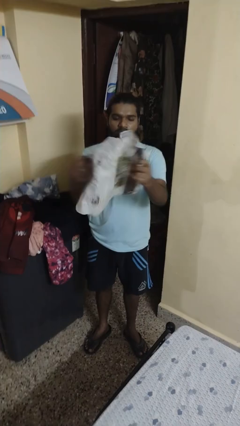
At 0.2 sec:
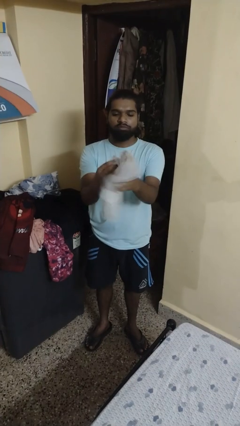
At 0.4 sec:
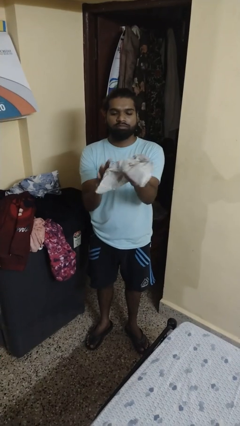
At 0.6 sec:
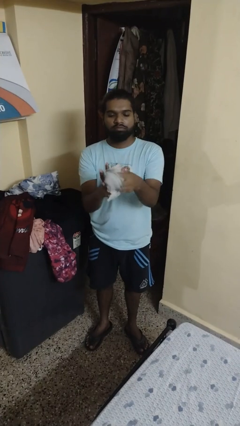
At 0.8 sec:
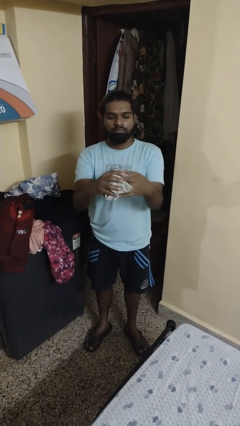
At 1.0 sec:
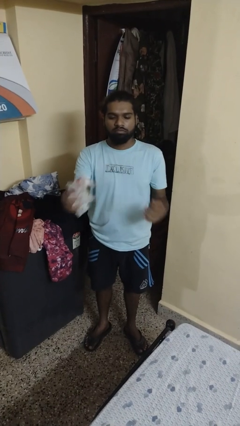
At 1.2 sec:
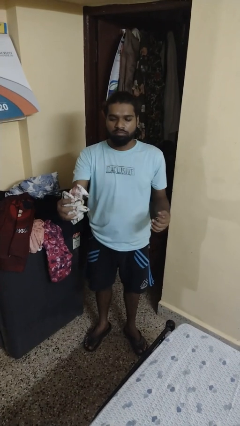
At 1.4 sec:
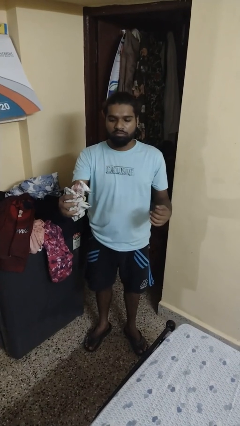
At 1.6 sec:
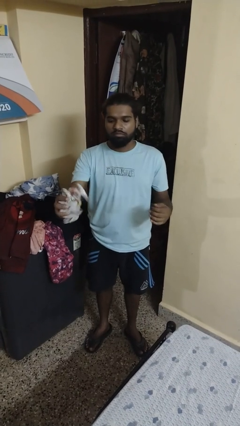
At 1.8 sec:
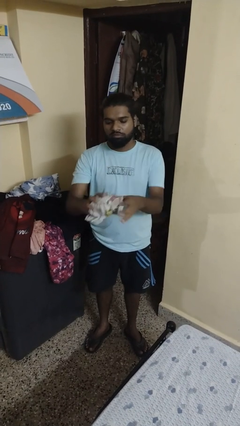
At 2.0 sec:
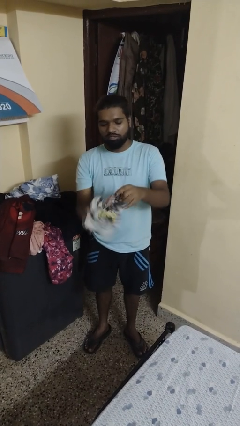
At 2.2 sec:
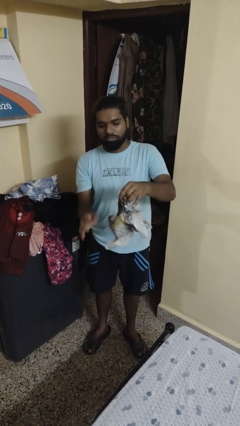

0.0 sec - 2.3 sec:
person crumples paper

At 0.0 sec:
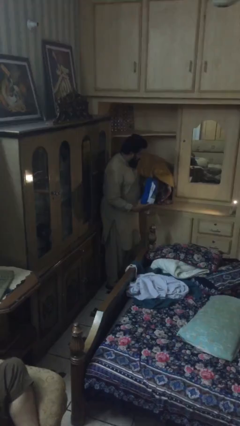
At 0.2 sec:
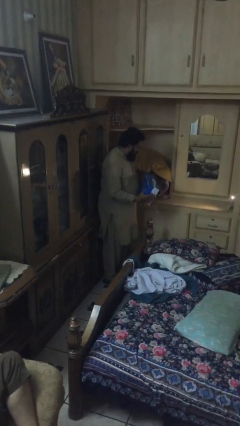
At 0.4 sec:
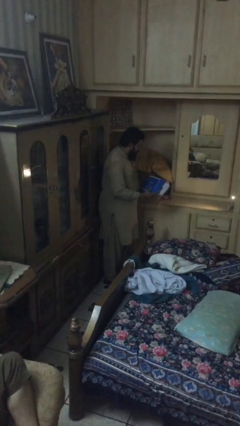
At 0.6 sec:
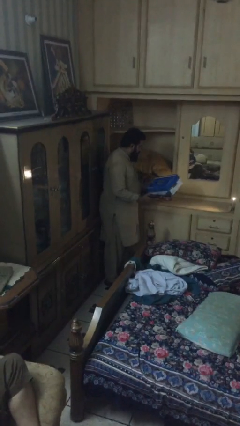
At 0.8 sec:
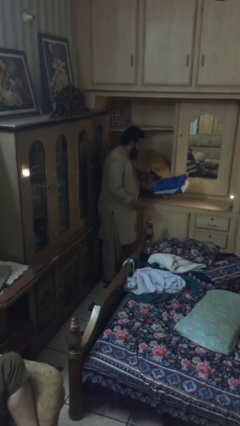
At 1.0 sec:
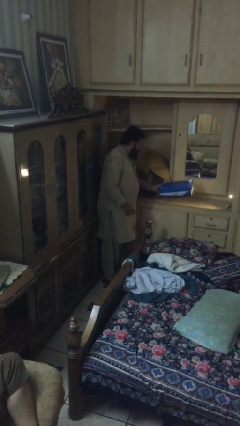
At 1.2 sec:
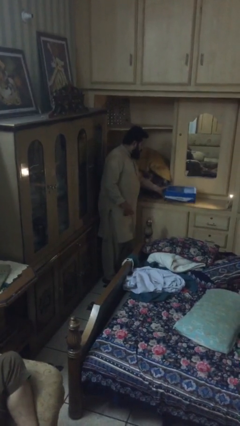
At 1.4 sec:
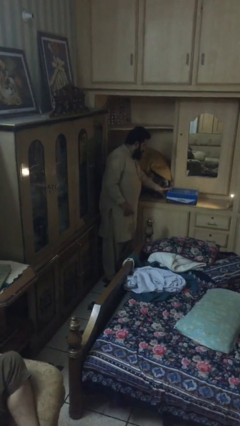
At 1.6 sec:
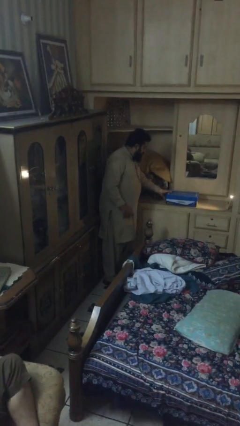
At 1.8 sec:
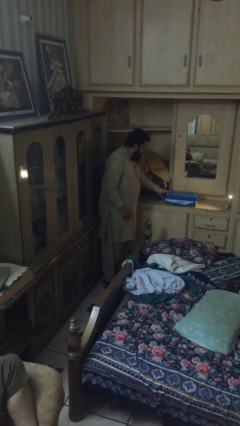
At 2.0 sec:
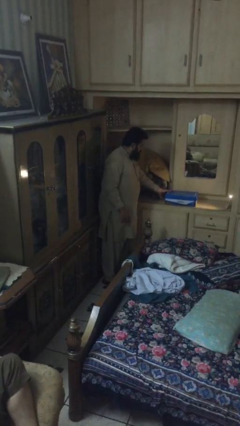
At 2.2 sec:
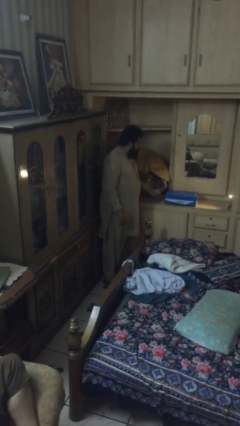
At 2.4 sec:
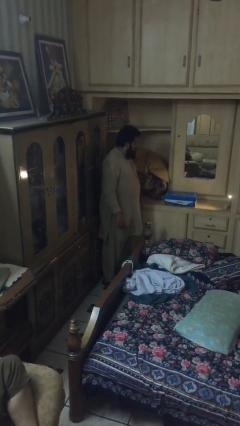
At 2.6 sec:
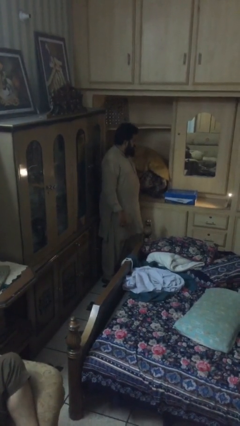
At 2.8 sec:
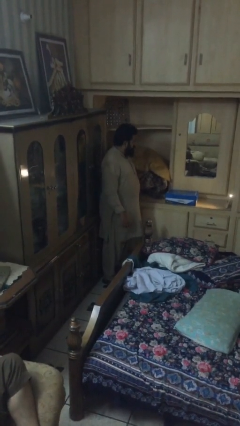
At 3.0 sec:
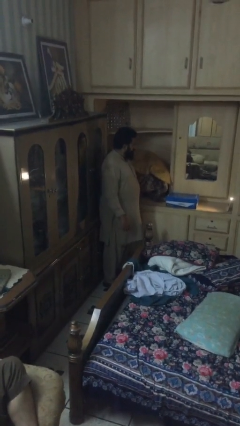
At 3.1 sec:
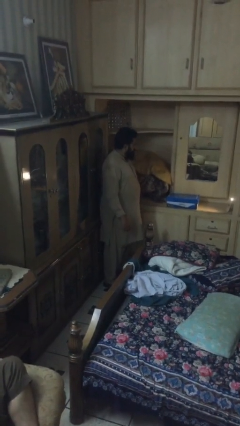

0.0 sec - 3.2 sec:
person puts down object on table

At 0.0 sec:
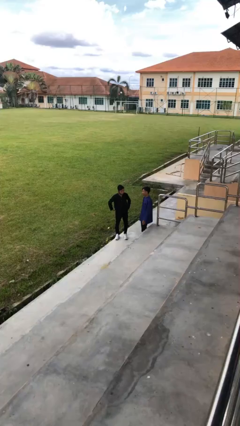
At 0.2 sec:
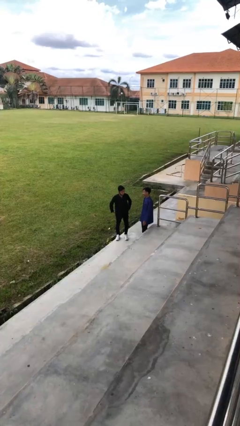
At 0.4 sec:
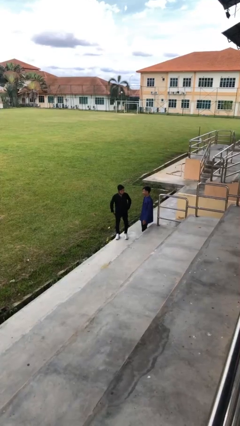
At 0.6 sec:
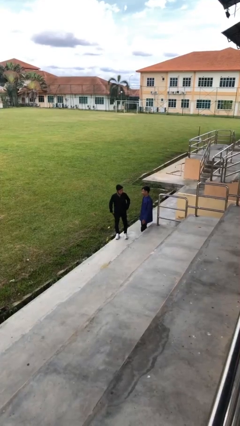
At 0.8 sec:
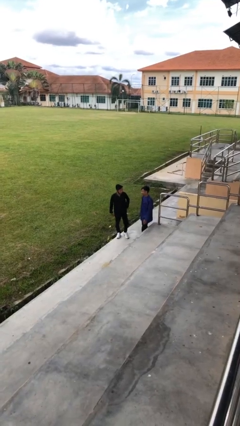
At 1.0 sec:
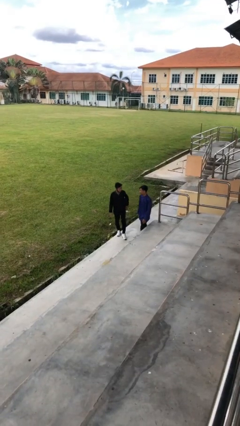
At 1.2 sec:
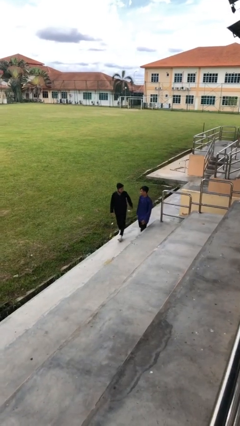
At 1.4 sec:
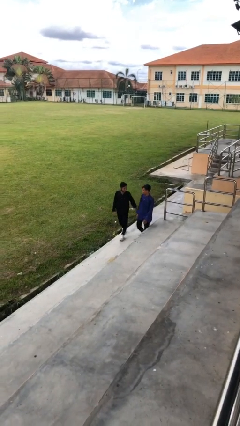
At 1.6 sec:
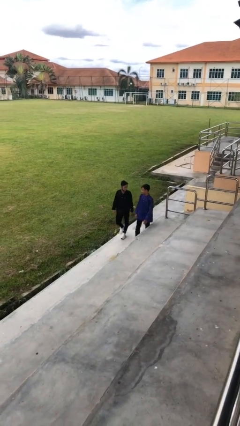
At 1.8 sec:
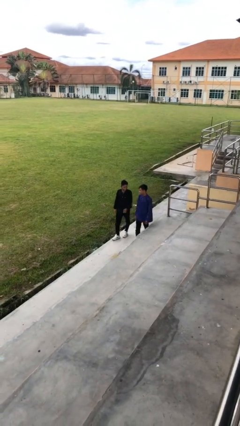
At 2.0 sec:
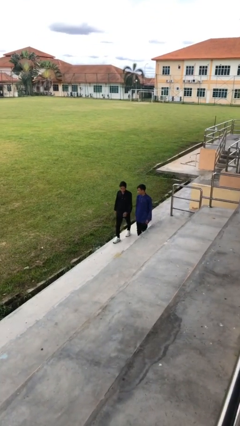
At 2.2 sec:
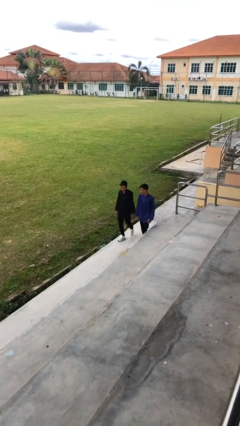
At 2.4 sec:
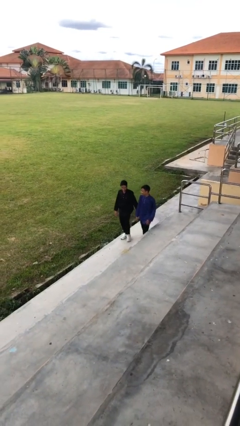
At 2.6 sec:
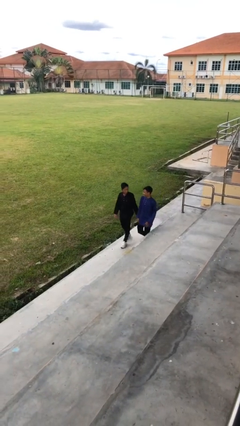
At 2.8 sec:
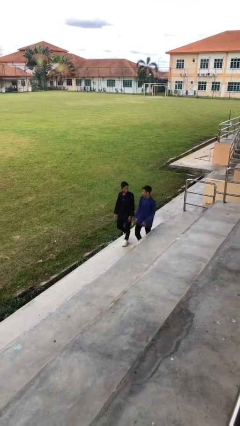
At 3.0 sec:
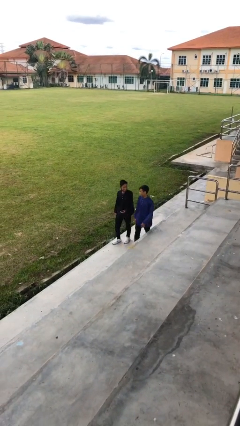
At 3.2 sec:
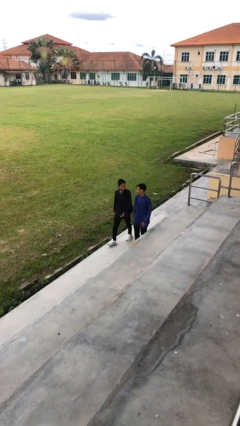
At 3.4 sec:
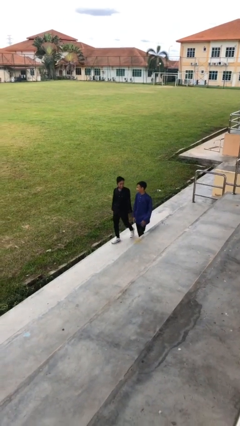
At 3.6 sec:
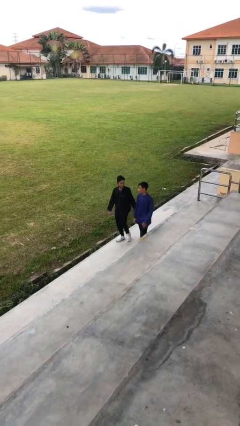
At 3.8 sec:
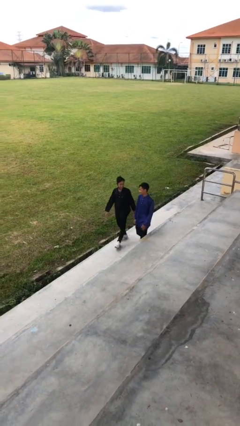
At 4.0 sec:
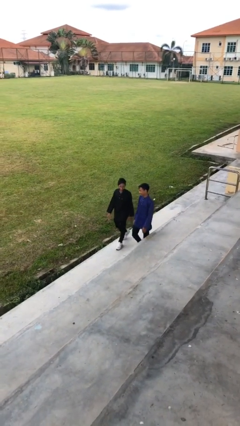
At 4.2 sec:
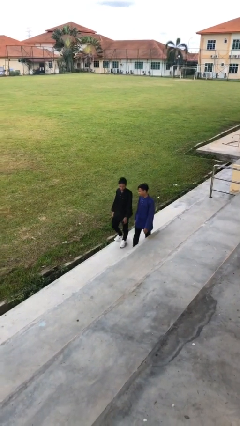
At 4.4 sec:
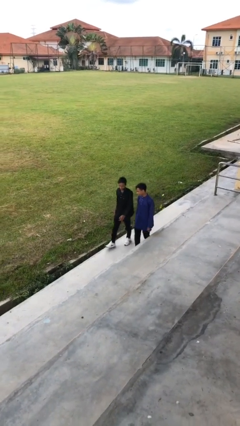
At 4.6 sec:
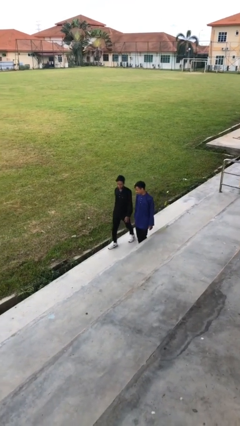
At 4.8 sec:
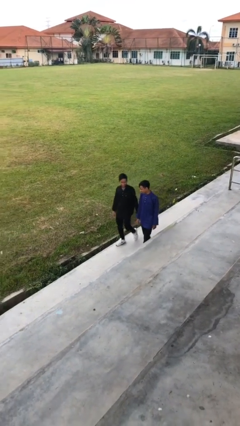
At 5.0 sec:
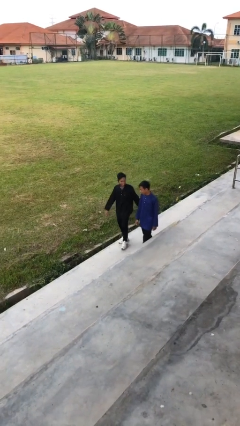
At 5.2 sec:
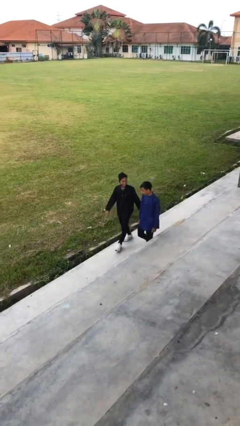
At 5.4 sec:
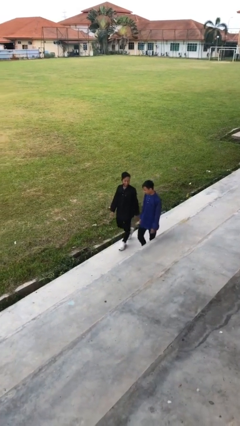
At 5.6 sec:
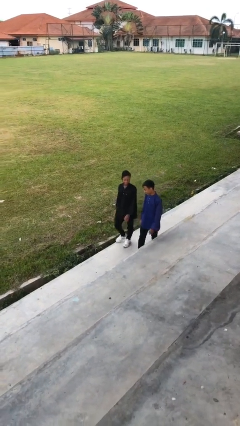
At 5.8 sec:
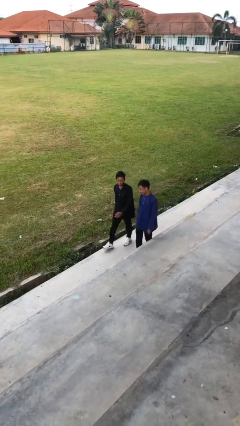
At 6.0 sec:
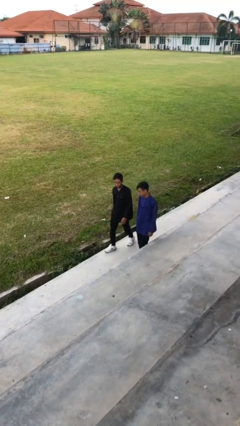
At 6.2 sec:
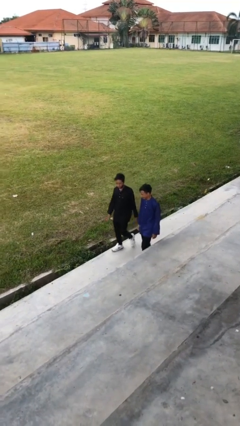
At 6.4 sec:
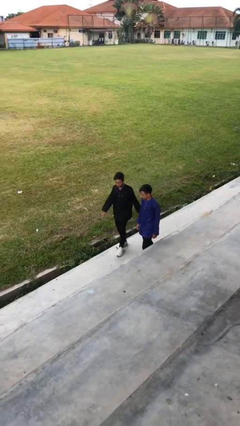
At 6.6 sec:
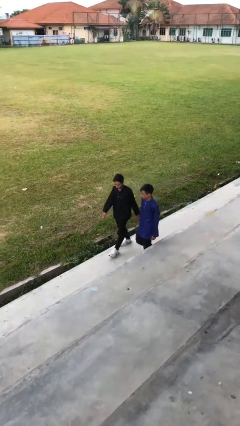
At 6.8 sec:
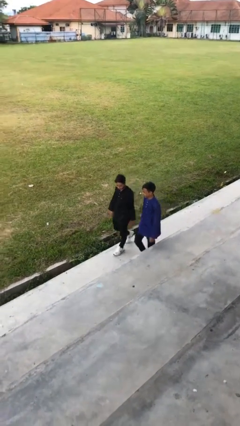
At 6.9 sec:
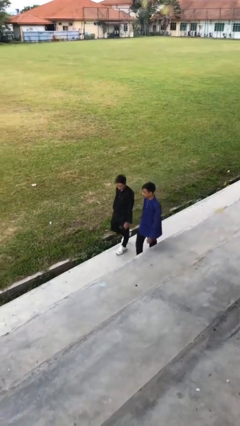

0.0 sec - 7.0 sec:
person talks to person

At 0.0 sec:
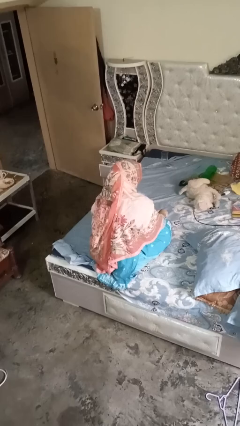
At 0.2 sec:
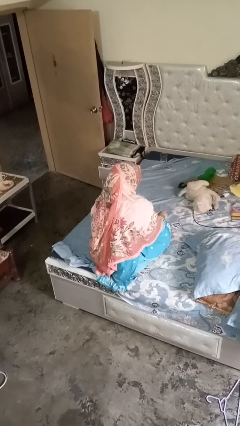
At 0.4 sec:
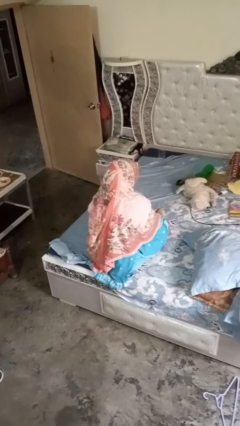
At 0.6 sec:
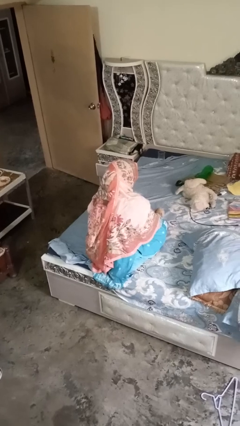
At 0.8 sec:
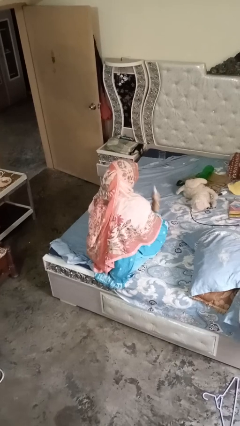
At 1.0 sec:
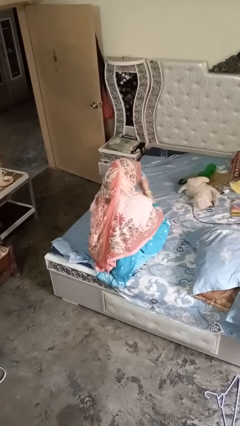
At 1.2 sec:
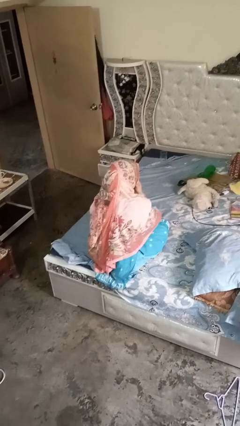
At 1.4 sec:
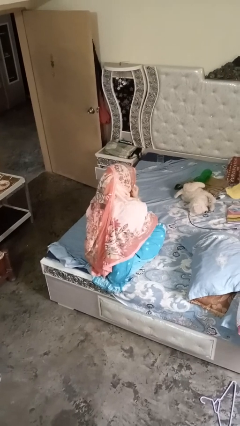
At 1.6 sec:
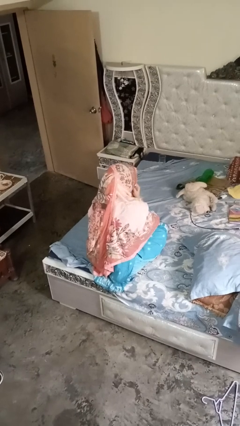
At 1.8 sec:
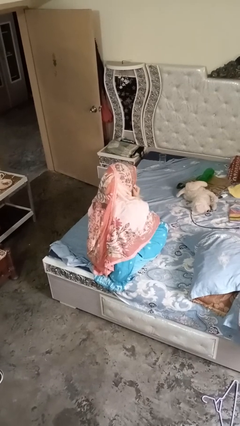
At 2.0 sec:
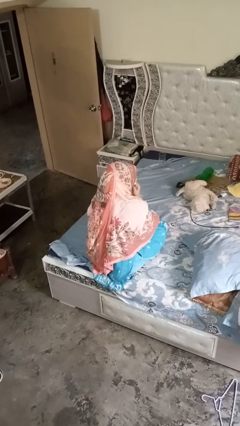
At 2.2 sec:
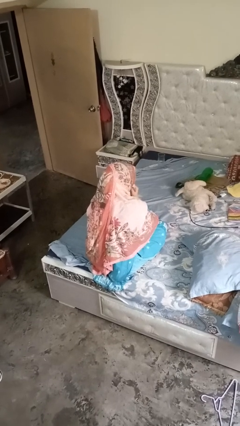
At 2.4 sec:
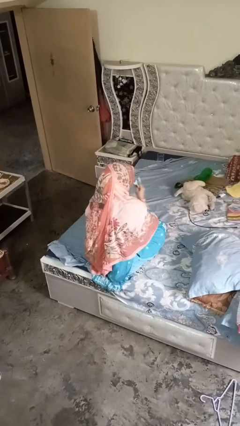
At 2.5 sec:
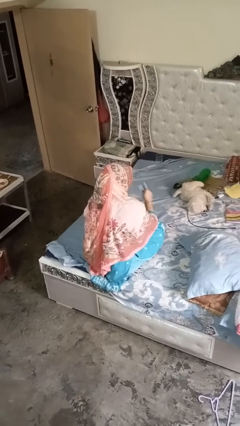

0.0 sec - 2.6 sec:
person blows nose

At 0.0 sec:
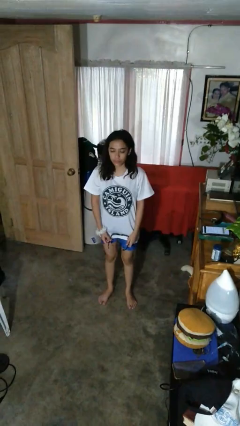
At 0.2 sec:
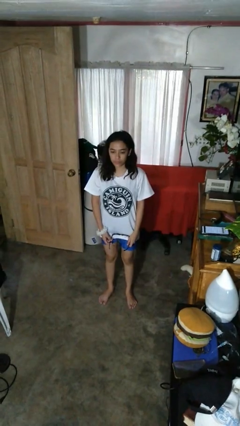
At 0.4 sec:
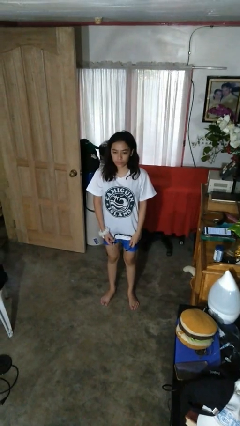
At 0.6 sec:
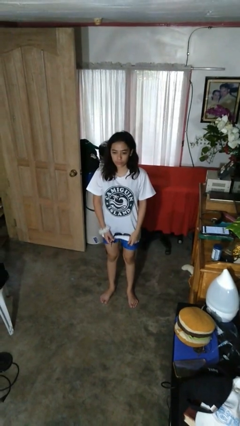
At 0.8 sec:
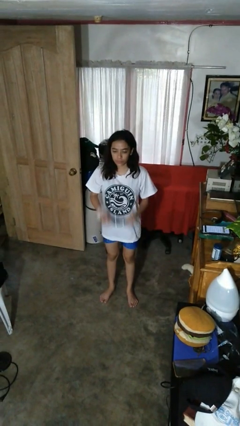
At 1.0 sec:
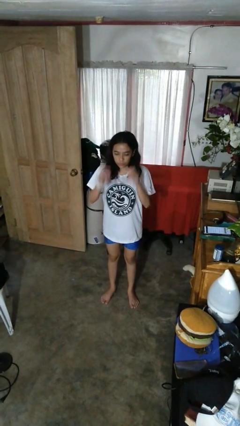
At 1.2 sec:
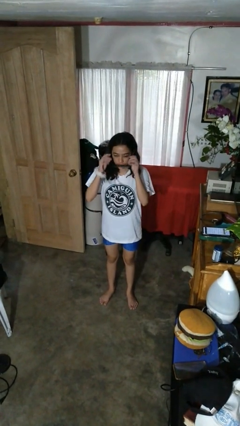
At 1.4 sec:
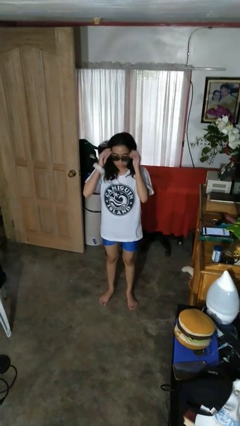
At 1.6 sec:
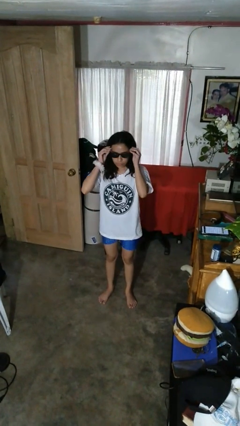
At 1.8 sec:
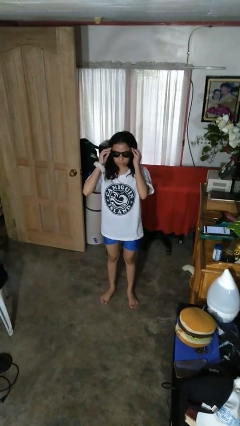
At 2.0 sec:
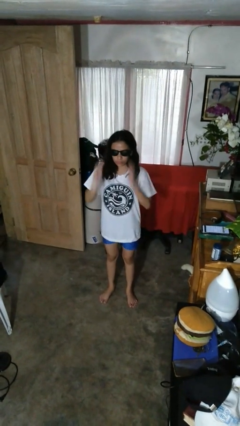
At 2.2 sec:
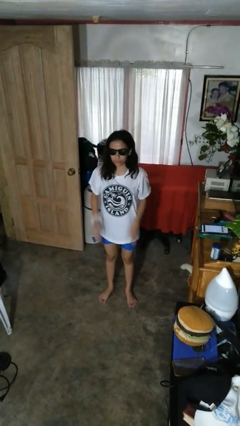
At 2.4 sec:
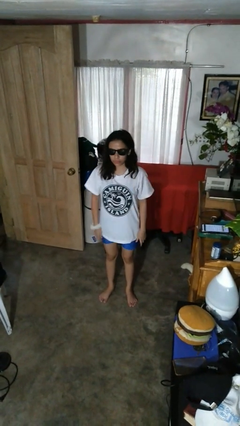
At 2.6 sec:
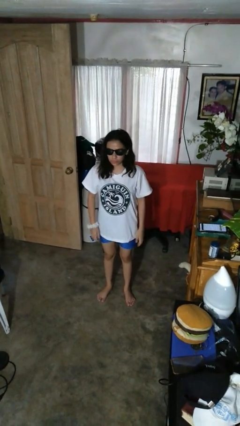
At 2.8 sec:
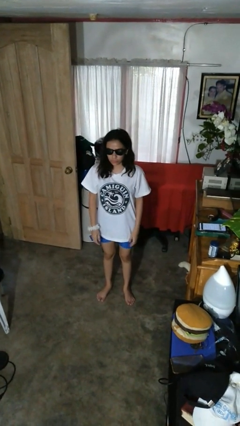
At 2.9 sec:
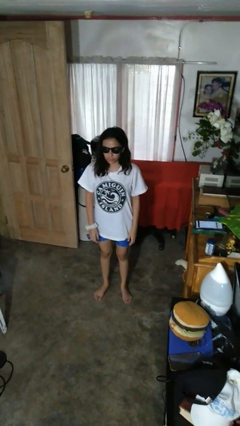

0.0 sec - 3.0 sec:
person puts on sunglasses
